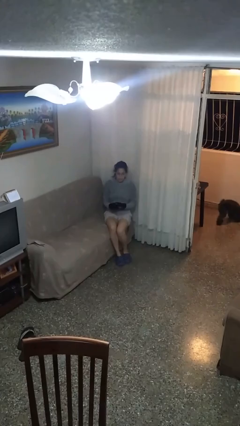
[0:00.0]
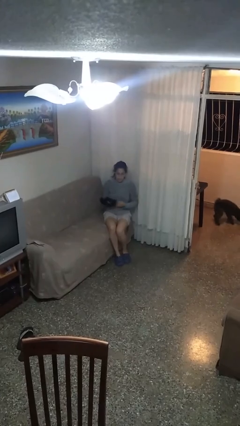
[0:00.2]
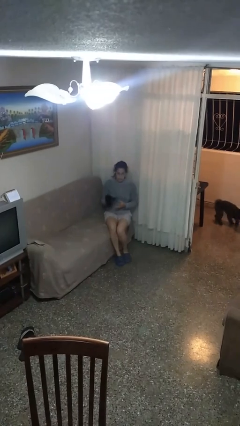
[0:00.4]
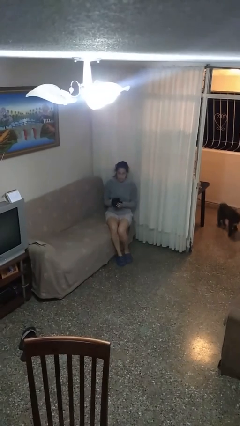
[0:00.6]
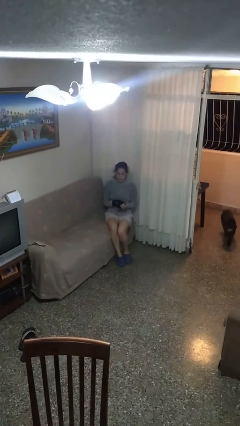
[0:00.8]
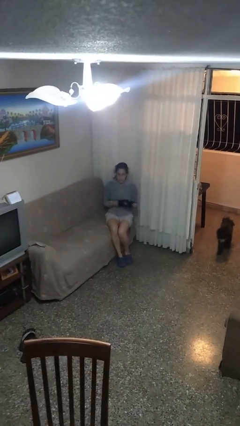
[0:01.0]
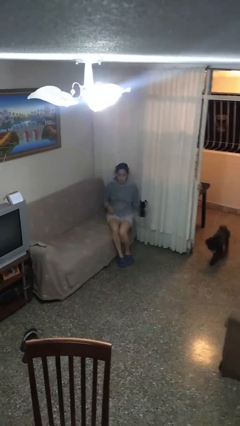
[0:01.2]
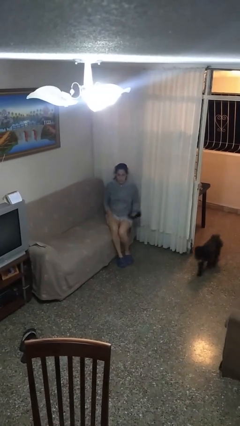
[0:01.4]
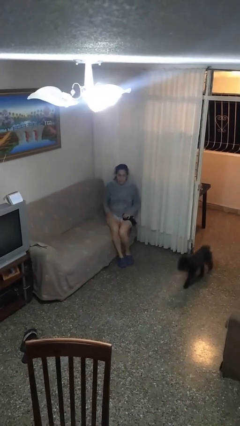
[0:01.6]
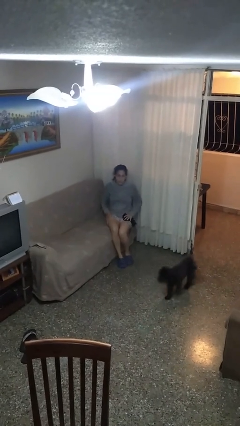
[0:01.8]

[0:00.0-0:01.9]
person takes off gloves

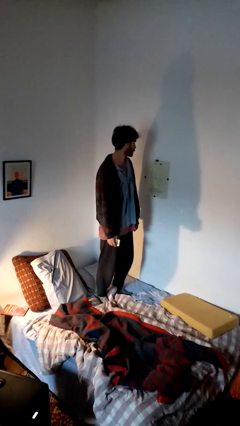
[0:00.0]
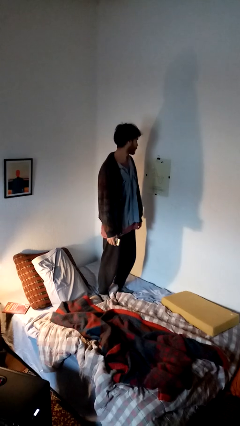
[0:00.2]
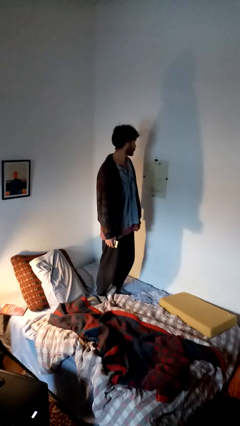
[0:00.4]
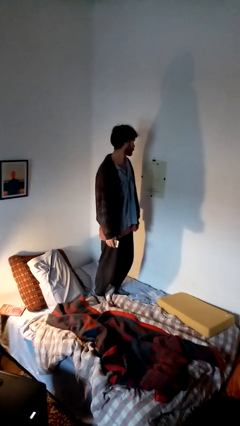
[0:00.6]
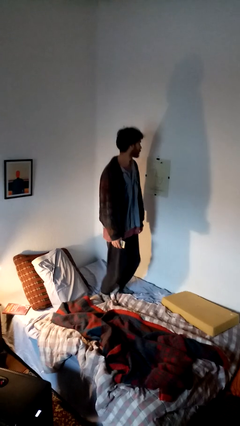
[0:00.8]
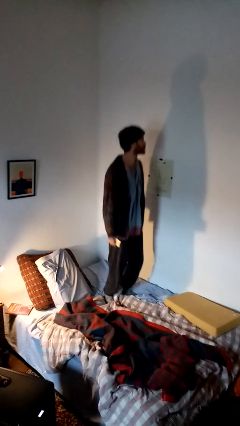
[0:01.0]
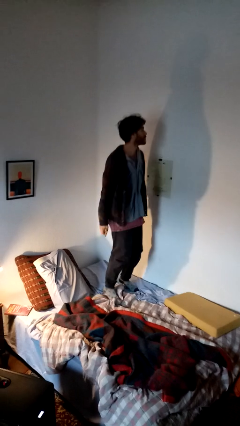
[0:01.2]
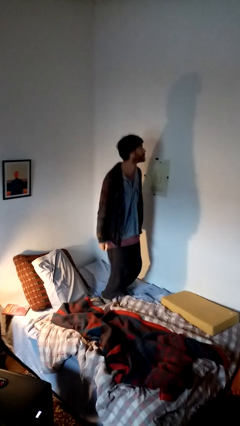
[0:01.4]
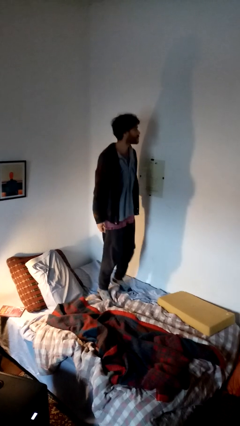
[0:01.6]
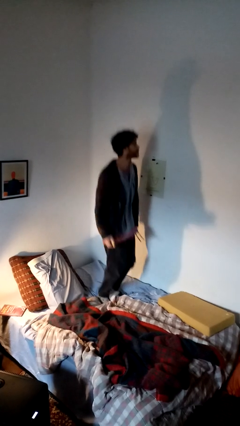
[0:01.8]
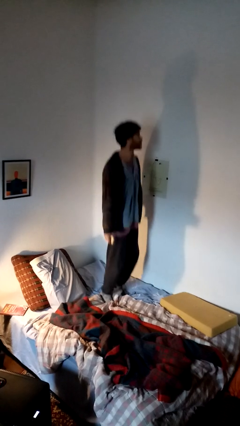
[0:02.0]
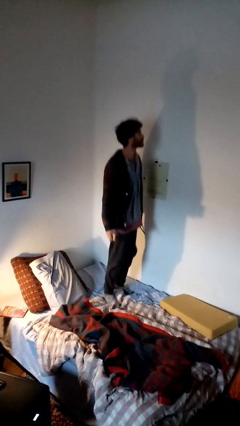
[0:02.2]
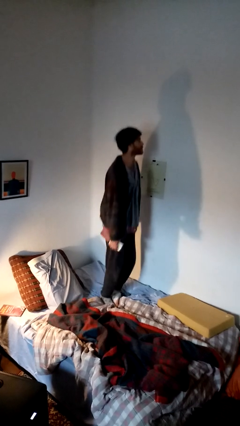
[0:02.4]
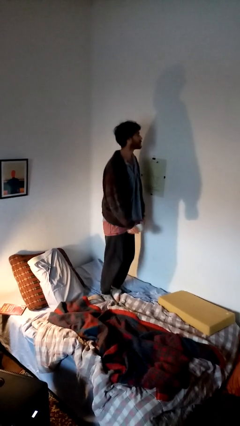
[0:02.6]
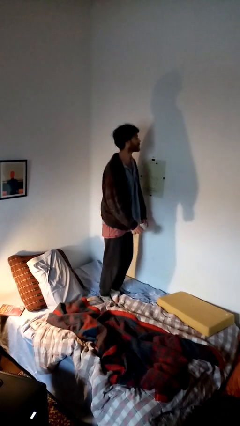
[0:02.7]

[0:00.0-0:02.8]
person jumps on bed

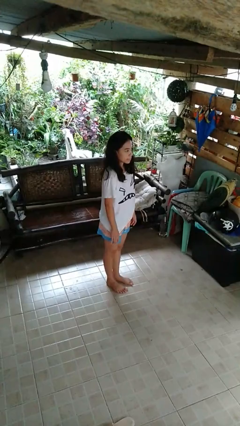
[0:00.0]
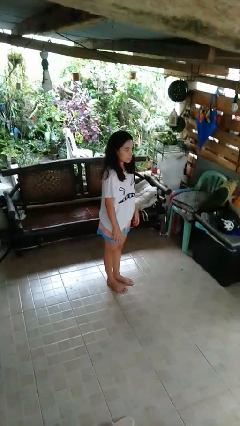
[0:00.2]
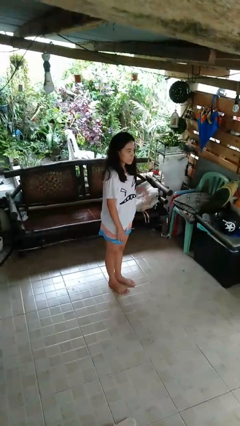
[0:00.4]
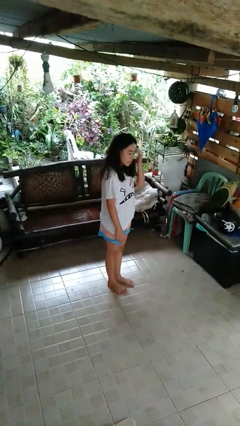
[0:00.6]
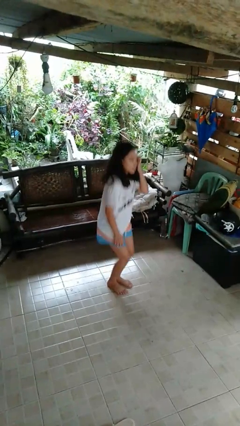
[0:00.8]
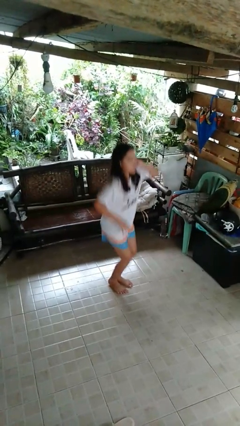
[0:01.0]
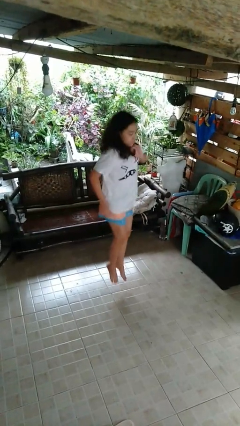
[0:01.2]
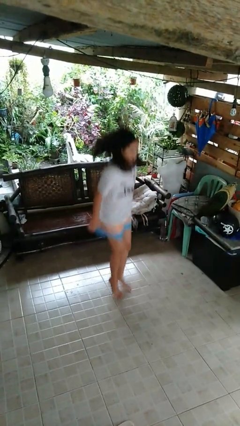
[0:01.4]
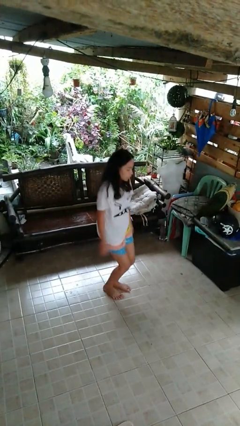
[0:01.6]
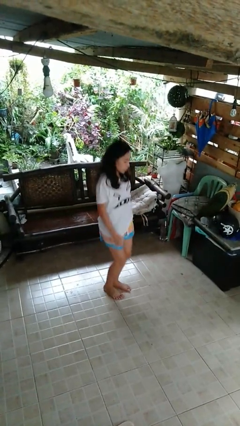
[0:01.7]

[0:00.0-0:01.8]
person jumps

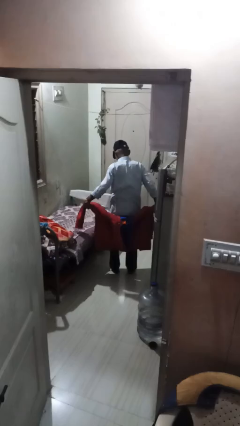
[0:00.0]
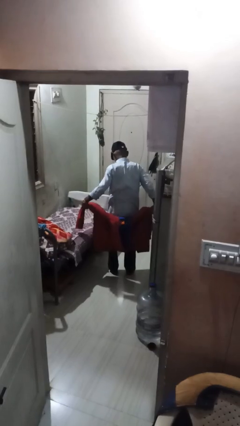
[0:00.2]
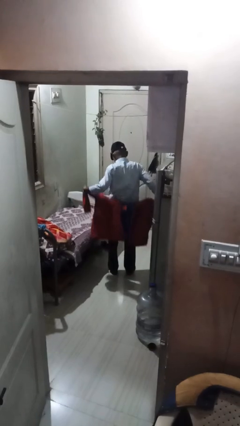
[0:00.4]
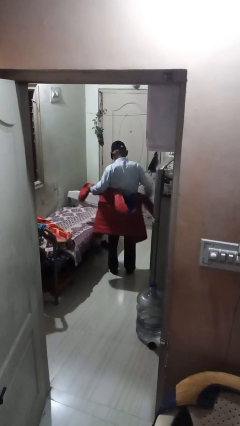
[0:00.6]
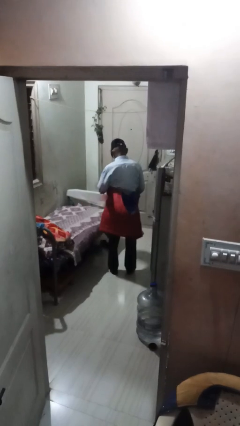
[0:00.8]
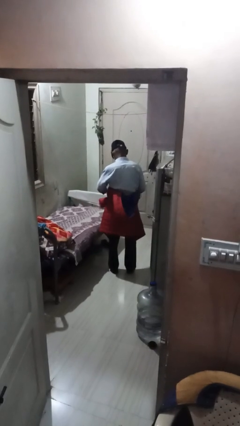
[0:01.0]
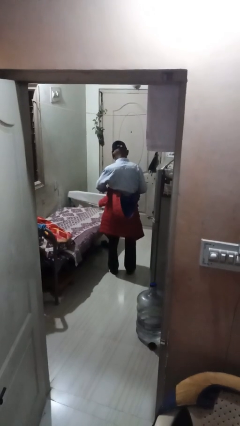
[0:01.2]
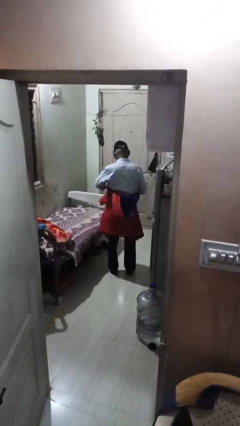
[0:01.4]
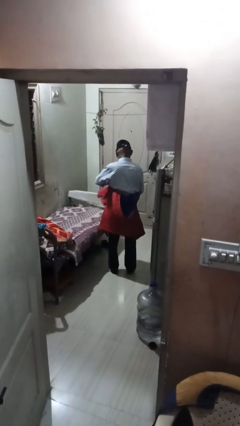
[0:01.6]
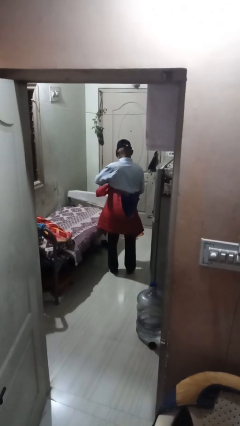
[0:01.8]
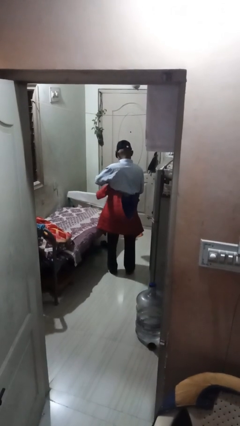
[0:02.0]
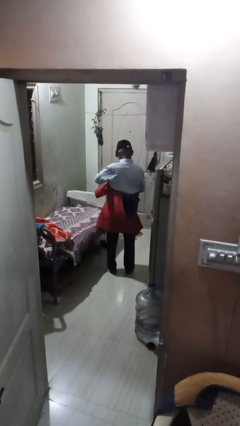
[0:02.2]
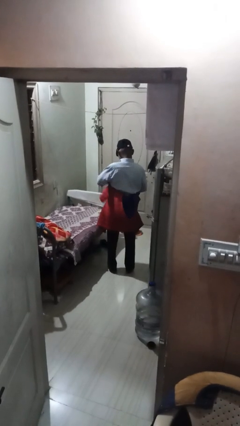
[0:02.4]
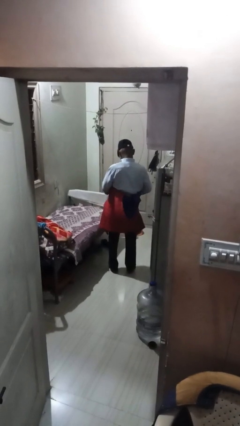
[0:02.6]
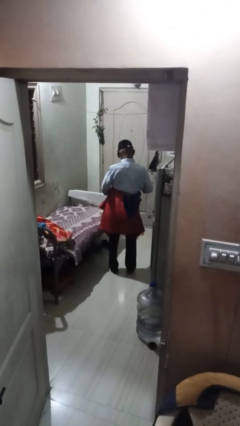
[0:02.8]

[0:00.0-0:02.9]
person ties jacket around waist

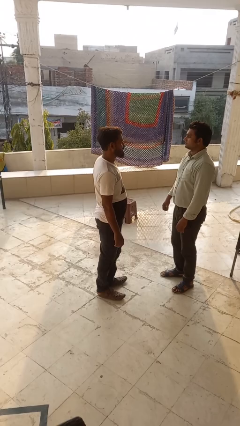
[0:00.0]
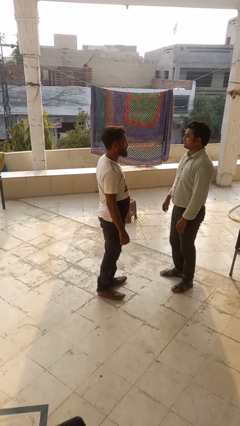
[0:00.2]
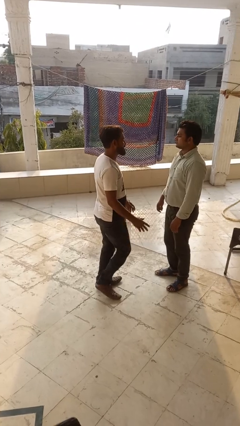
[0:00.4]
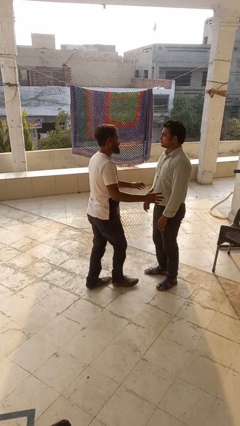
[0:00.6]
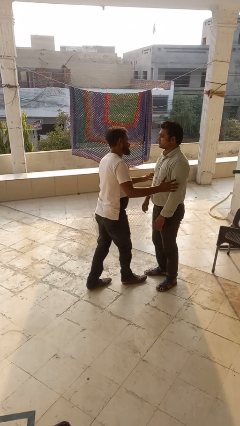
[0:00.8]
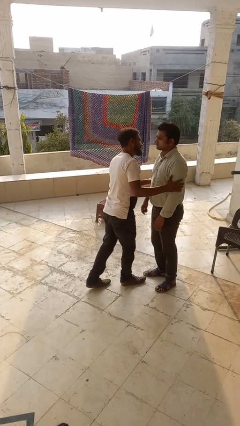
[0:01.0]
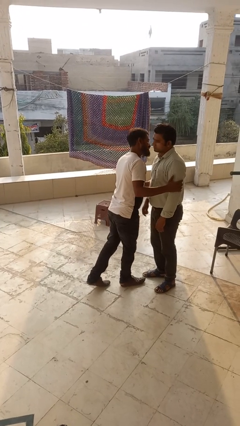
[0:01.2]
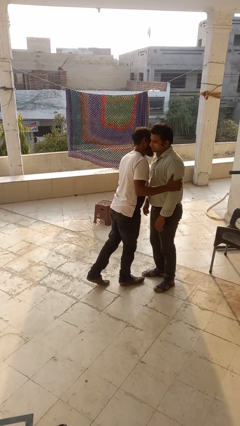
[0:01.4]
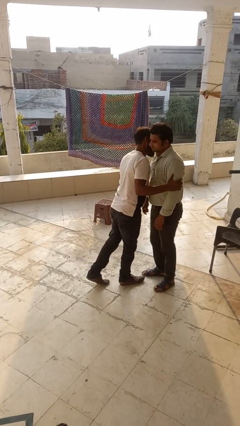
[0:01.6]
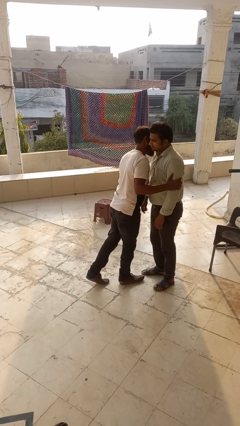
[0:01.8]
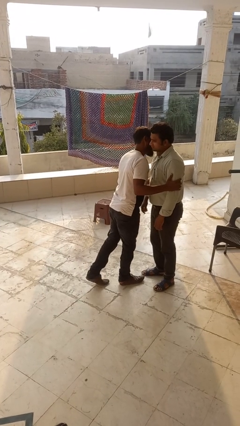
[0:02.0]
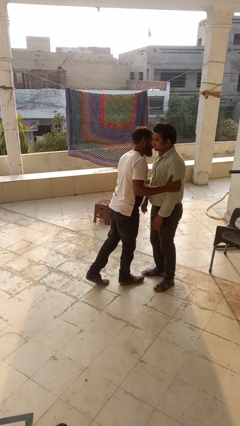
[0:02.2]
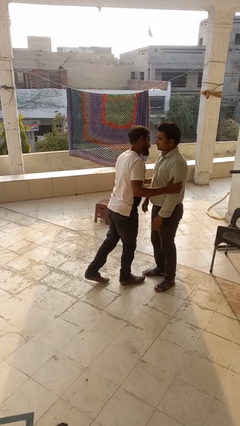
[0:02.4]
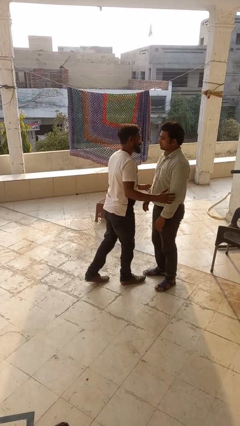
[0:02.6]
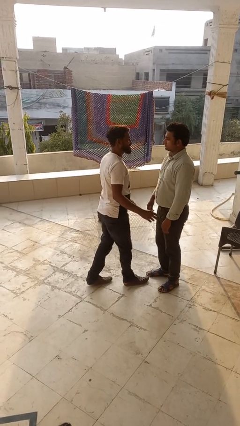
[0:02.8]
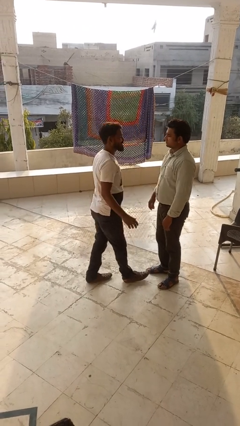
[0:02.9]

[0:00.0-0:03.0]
person kisses cheek of person

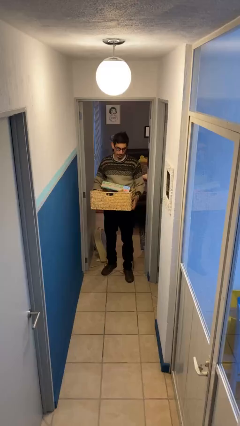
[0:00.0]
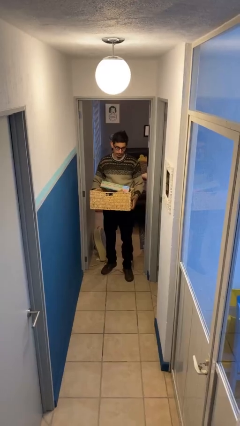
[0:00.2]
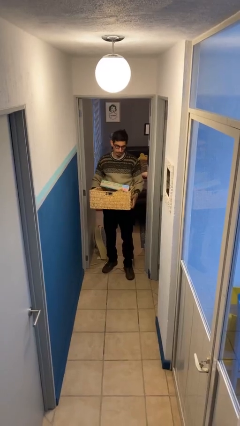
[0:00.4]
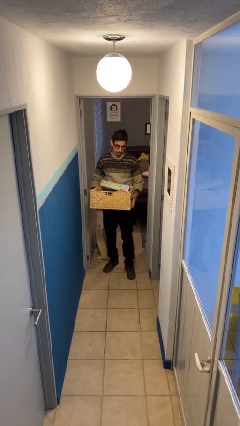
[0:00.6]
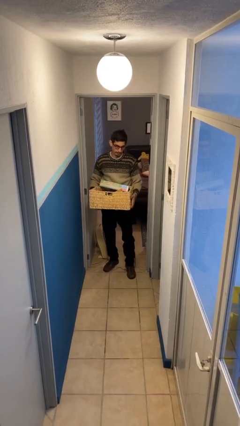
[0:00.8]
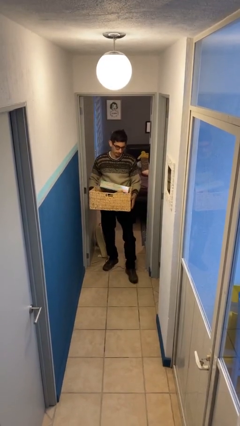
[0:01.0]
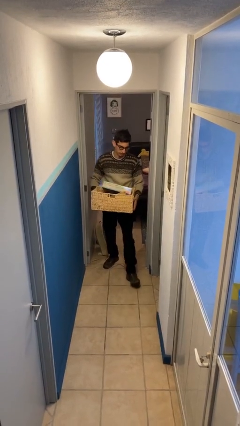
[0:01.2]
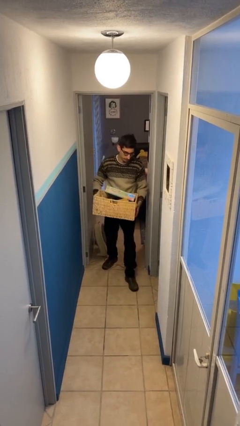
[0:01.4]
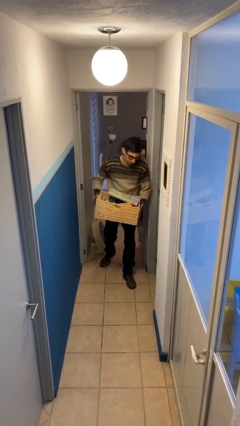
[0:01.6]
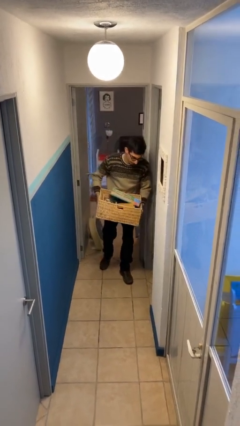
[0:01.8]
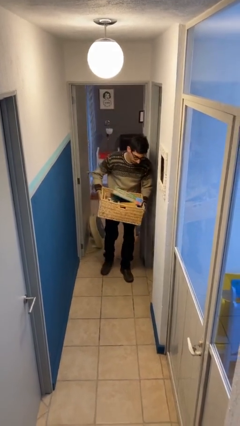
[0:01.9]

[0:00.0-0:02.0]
person carries heavy object

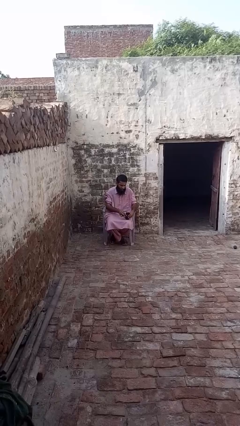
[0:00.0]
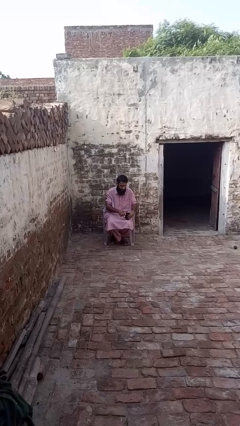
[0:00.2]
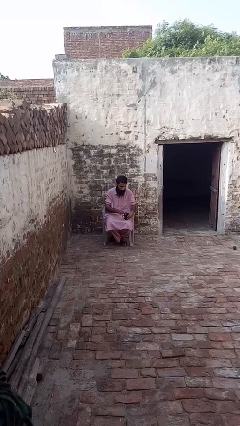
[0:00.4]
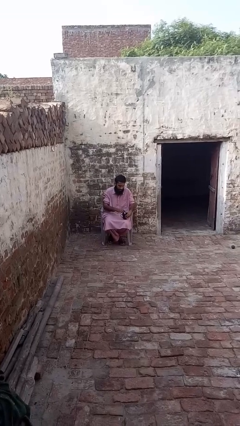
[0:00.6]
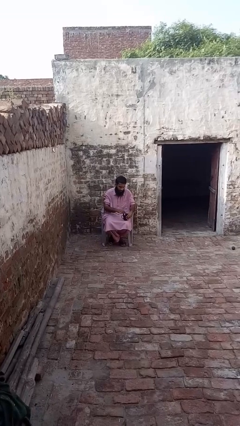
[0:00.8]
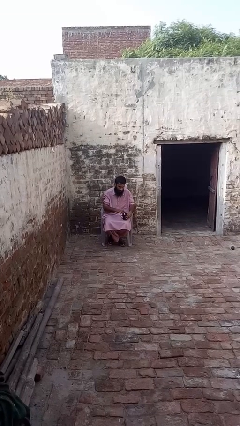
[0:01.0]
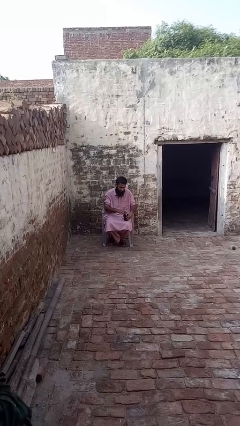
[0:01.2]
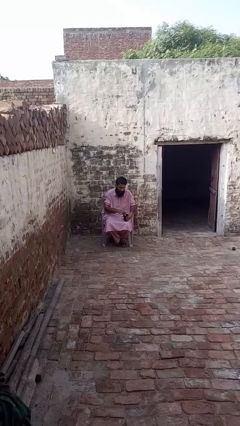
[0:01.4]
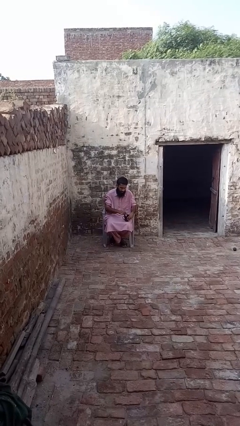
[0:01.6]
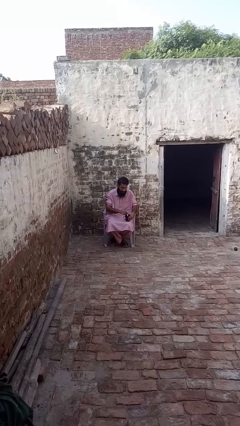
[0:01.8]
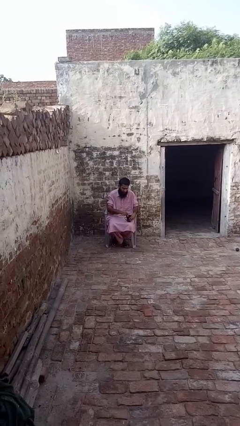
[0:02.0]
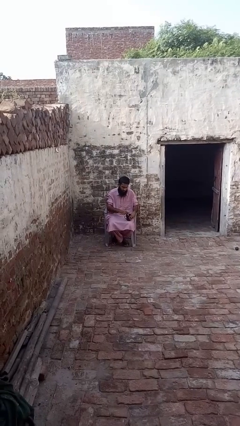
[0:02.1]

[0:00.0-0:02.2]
person stirs mug

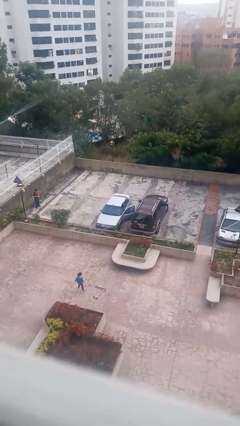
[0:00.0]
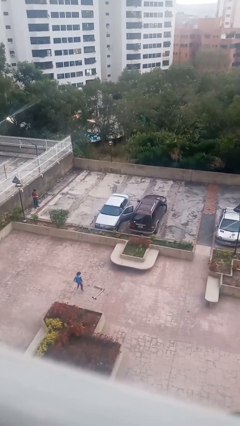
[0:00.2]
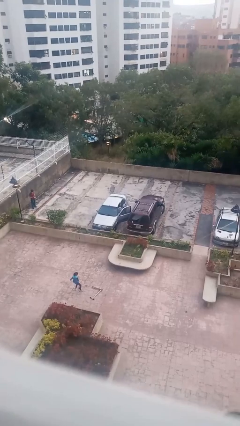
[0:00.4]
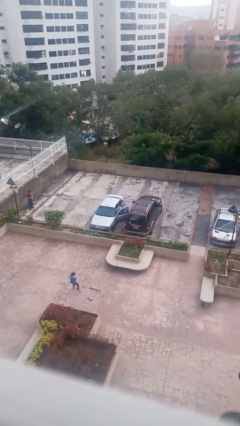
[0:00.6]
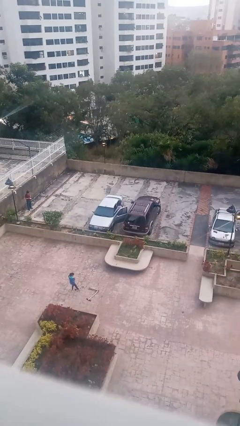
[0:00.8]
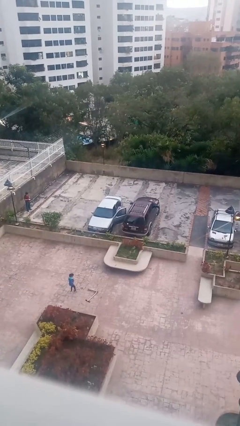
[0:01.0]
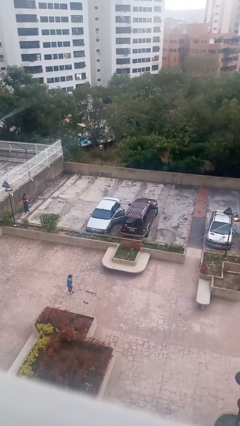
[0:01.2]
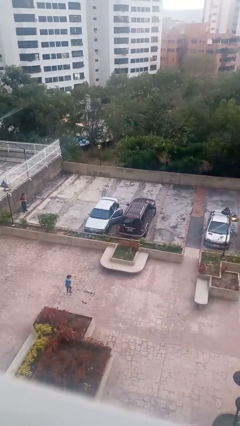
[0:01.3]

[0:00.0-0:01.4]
person exits car
